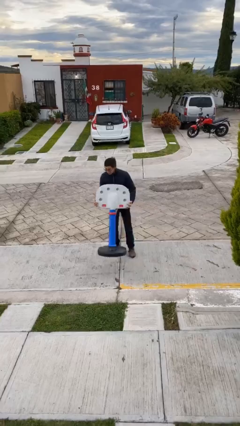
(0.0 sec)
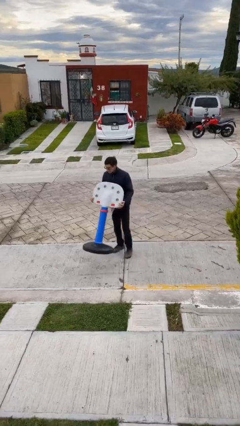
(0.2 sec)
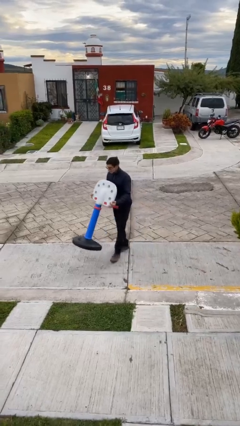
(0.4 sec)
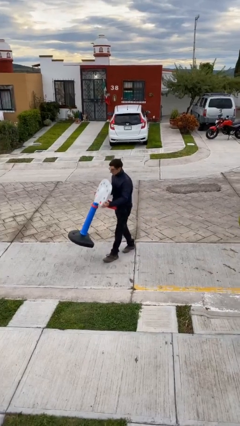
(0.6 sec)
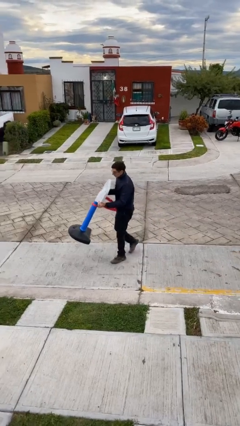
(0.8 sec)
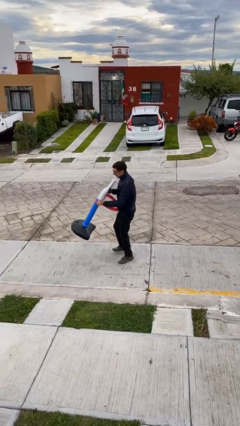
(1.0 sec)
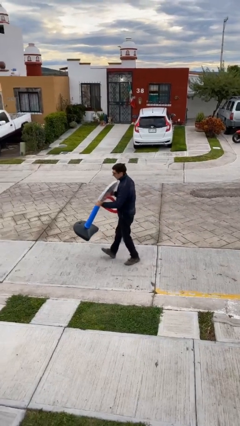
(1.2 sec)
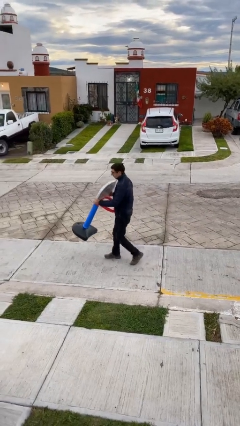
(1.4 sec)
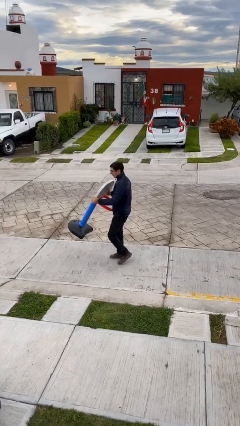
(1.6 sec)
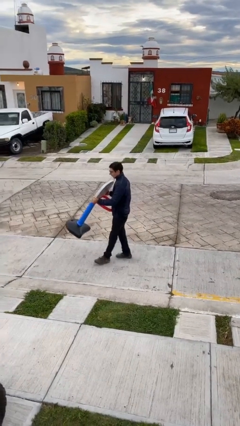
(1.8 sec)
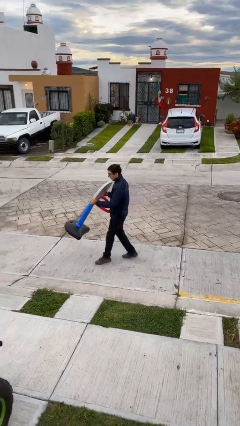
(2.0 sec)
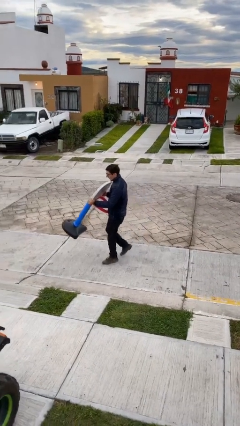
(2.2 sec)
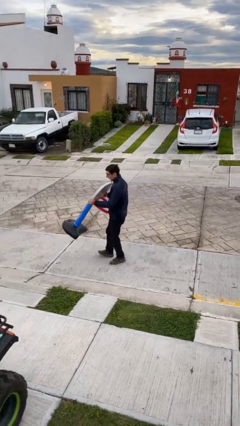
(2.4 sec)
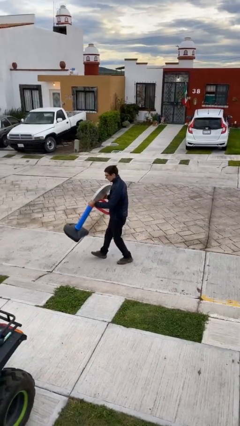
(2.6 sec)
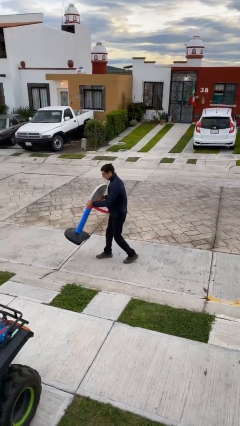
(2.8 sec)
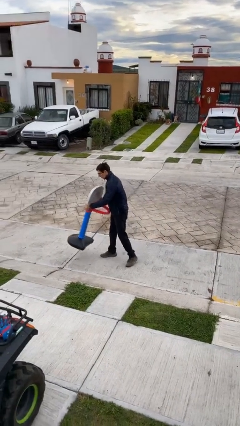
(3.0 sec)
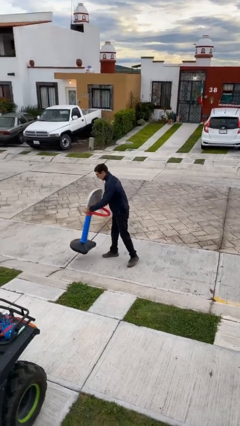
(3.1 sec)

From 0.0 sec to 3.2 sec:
person carries heavy object

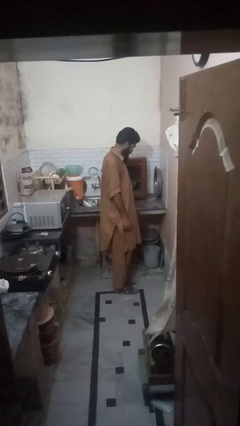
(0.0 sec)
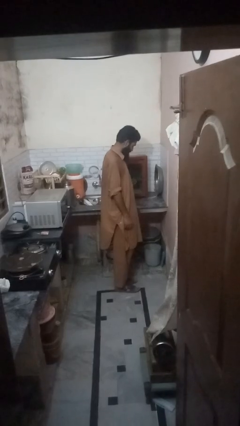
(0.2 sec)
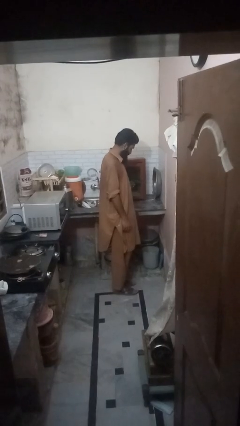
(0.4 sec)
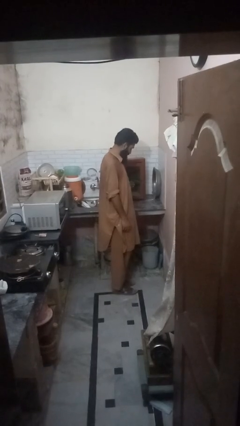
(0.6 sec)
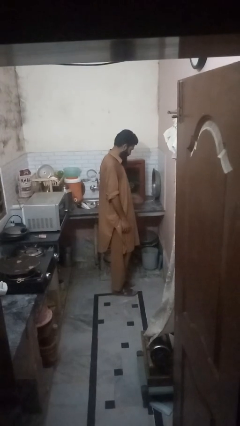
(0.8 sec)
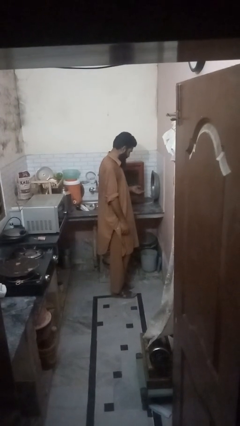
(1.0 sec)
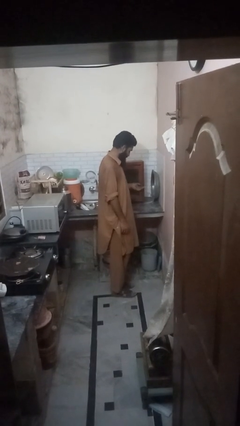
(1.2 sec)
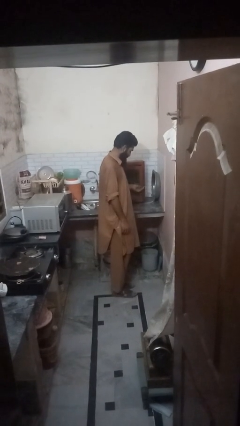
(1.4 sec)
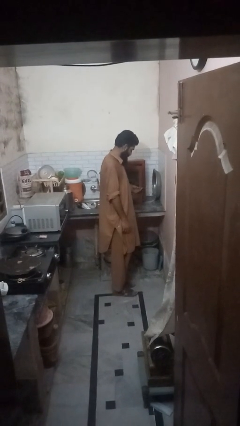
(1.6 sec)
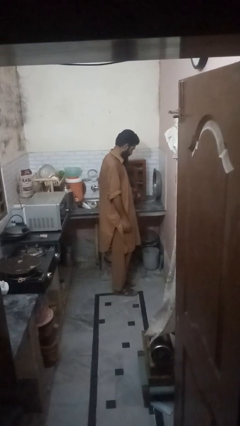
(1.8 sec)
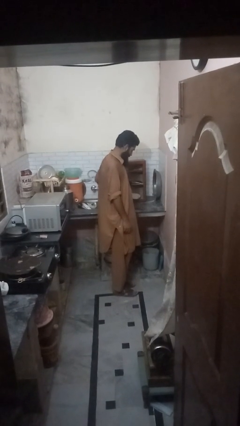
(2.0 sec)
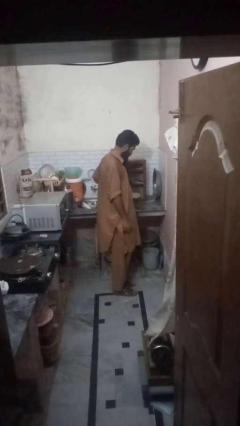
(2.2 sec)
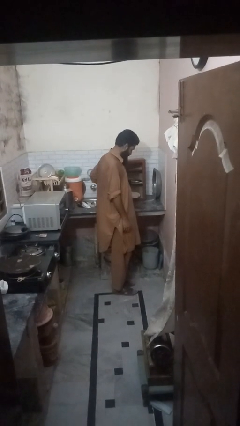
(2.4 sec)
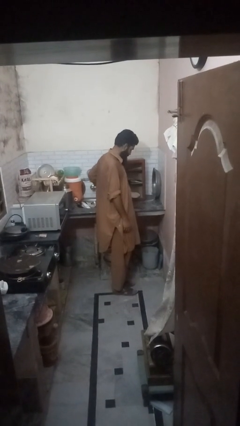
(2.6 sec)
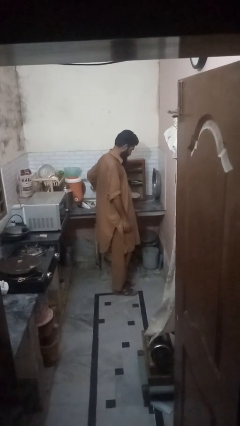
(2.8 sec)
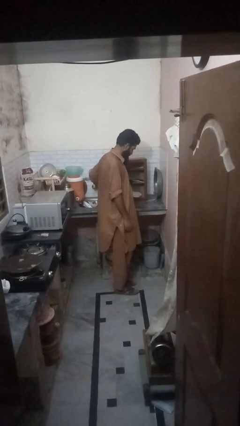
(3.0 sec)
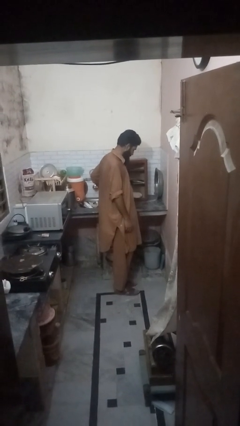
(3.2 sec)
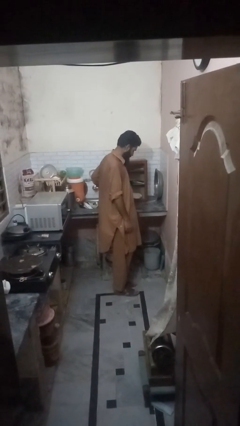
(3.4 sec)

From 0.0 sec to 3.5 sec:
person opens cabinet

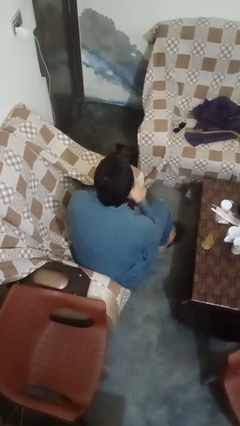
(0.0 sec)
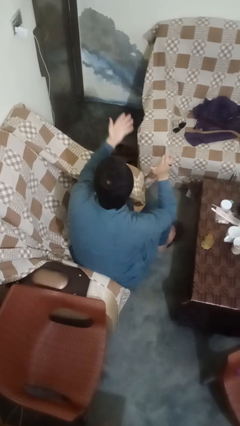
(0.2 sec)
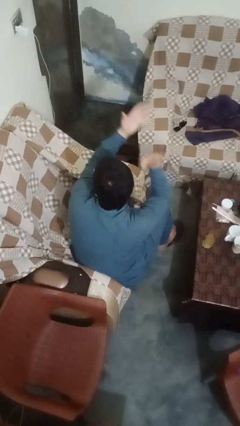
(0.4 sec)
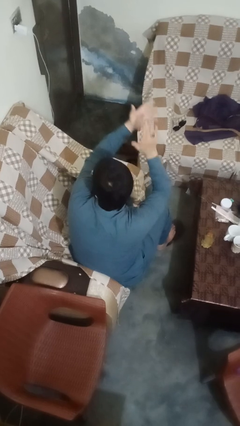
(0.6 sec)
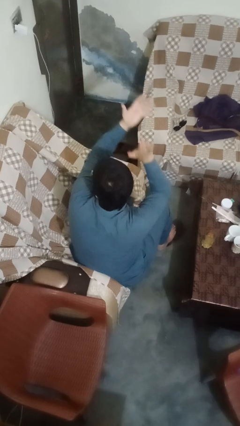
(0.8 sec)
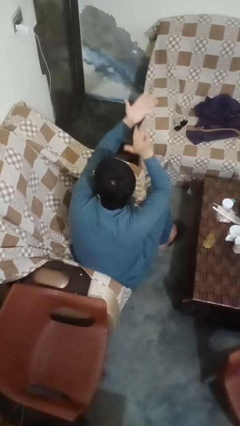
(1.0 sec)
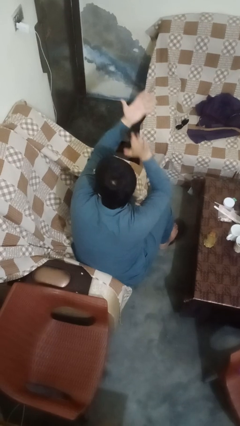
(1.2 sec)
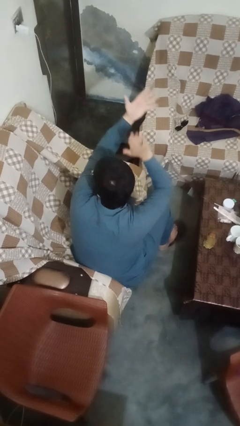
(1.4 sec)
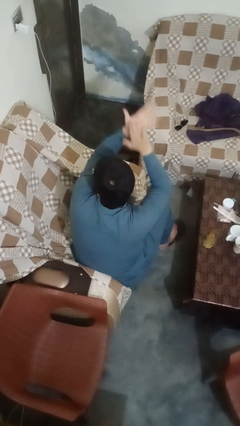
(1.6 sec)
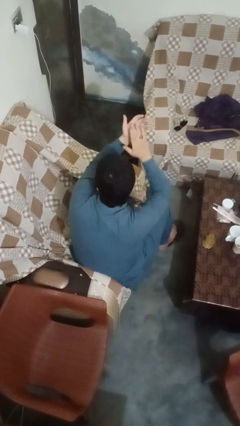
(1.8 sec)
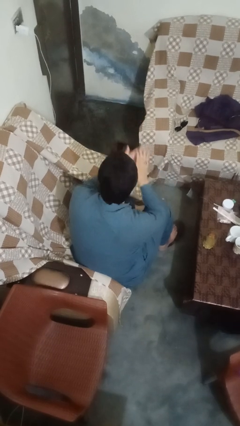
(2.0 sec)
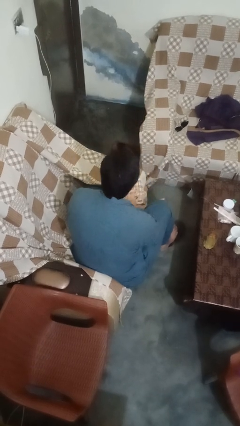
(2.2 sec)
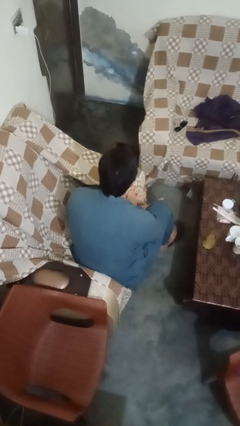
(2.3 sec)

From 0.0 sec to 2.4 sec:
person claps hands

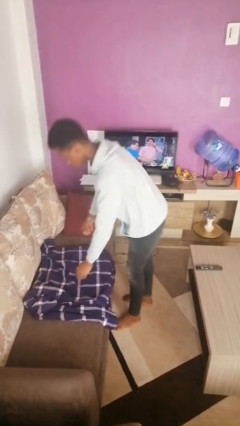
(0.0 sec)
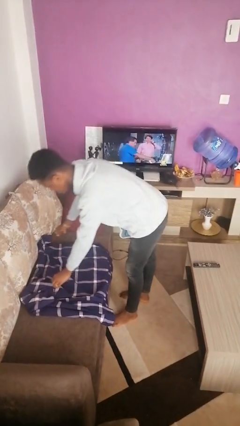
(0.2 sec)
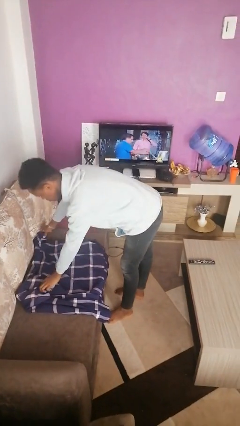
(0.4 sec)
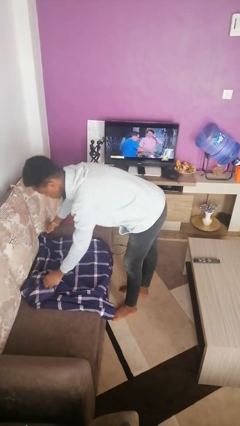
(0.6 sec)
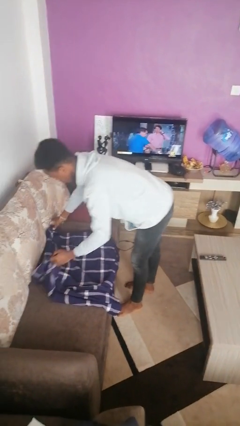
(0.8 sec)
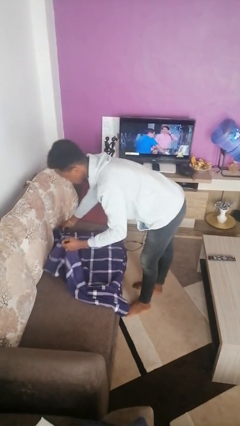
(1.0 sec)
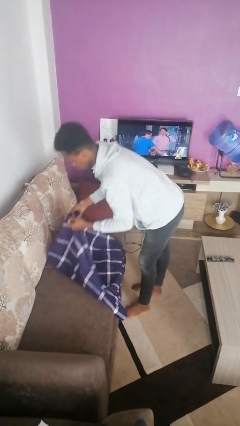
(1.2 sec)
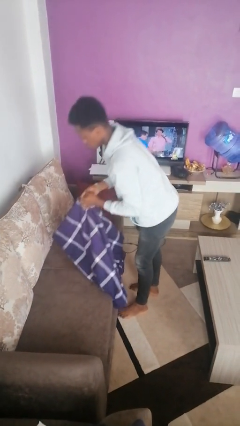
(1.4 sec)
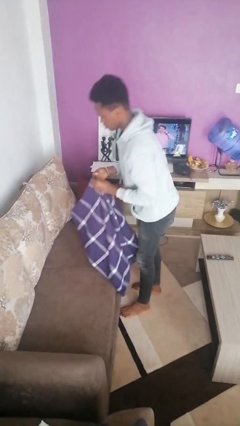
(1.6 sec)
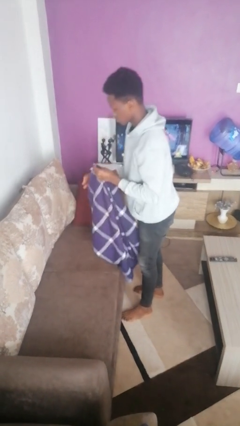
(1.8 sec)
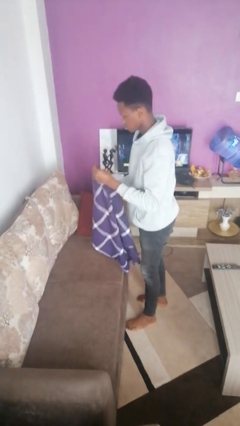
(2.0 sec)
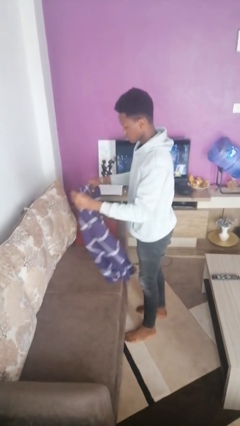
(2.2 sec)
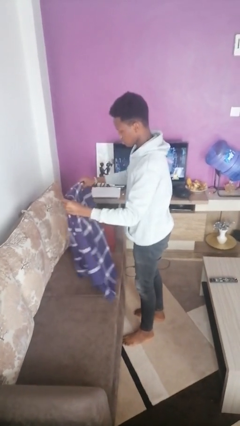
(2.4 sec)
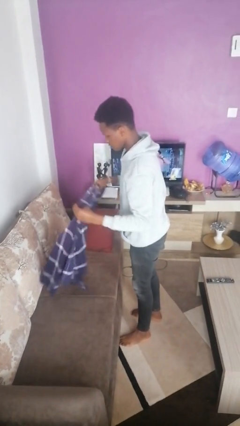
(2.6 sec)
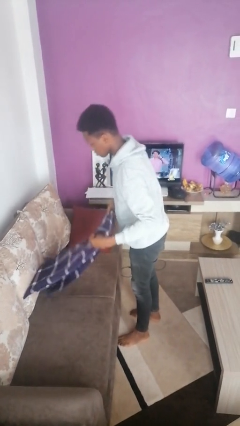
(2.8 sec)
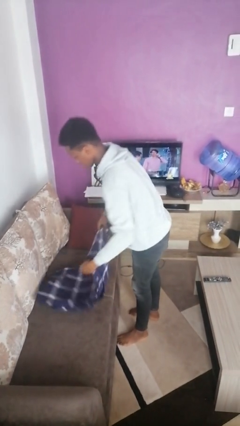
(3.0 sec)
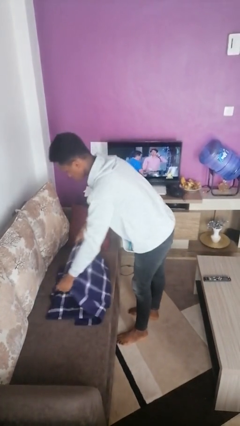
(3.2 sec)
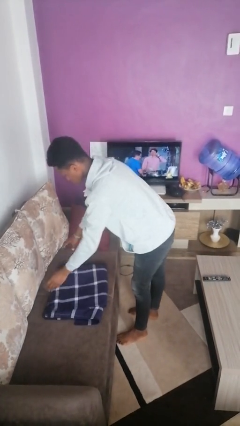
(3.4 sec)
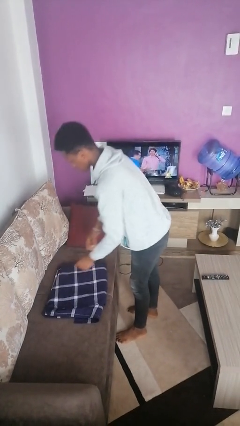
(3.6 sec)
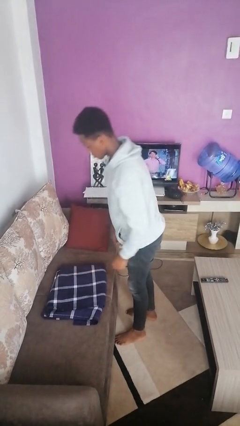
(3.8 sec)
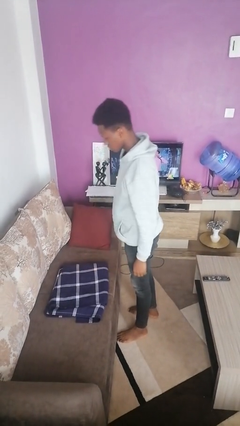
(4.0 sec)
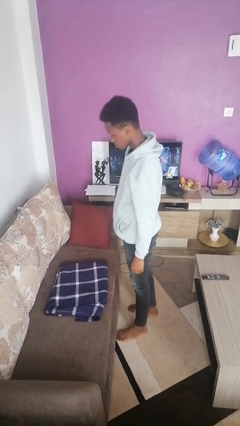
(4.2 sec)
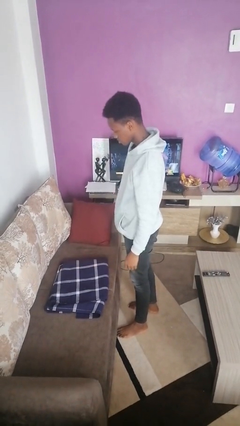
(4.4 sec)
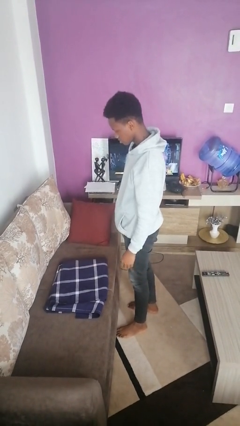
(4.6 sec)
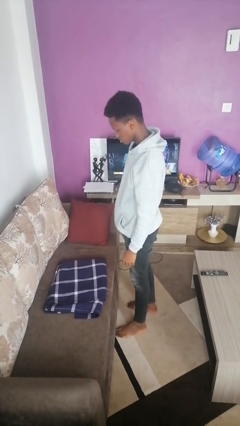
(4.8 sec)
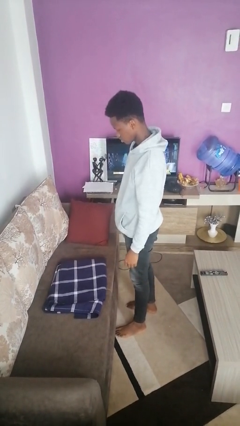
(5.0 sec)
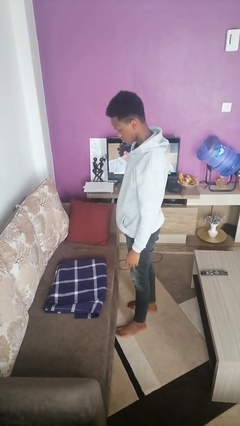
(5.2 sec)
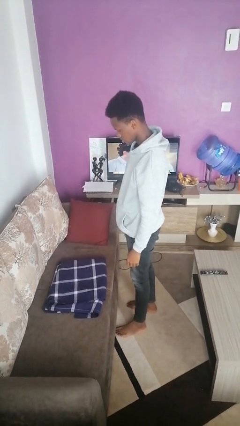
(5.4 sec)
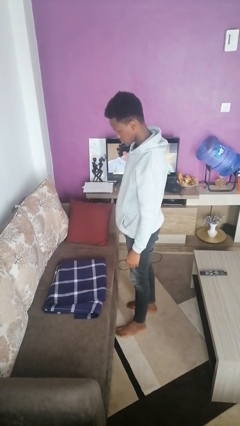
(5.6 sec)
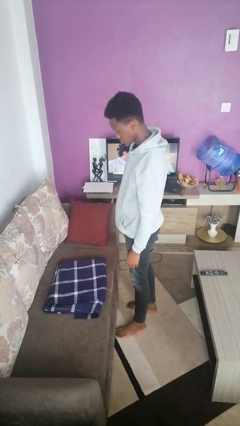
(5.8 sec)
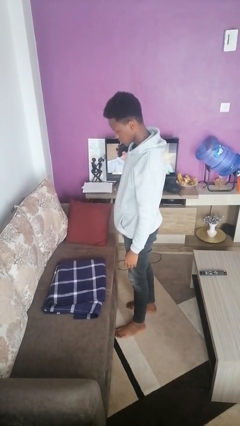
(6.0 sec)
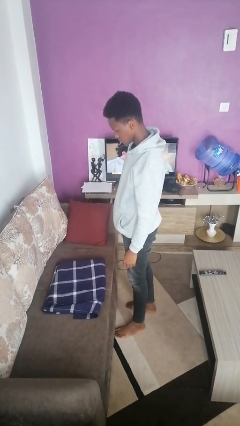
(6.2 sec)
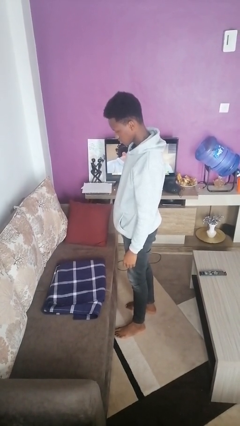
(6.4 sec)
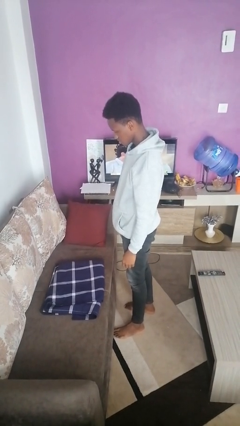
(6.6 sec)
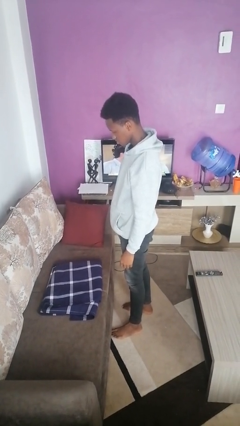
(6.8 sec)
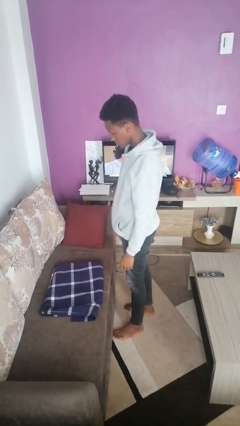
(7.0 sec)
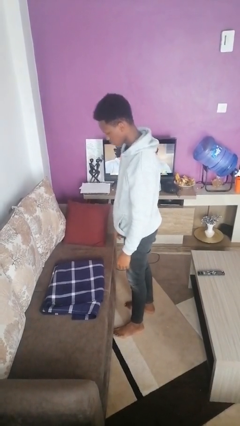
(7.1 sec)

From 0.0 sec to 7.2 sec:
person folds blanket

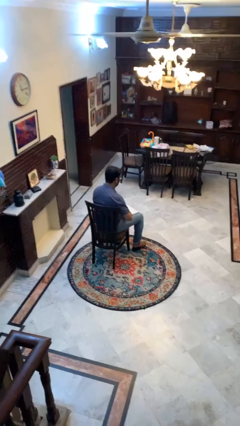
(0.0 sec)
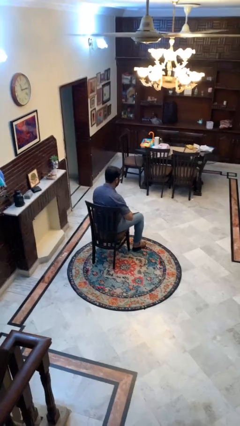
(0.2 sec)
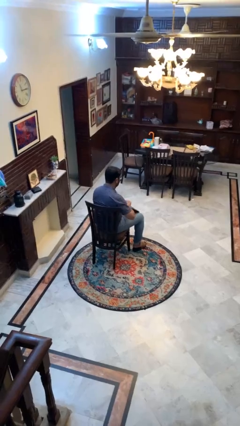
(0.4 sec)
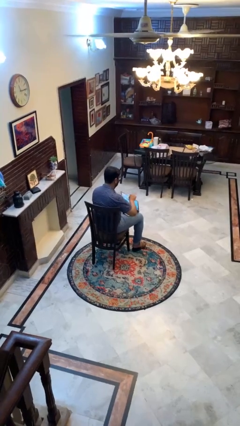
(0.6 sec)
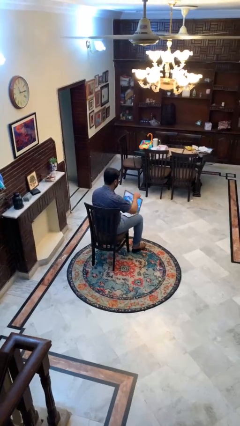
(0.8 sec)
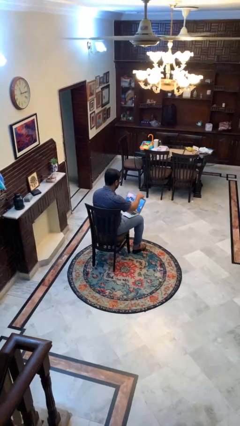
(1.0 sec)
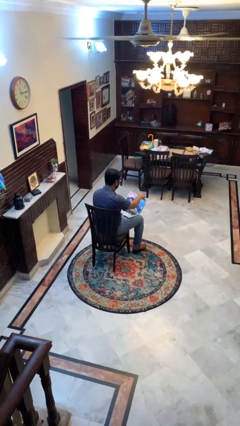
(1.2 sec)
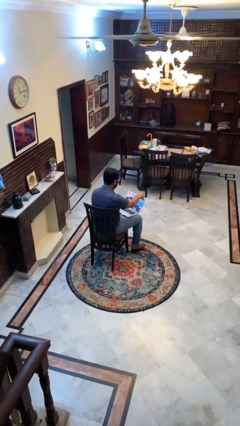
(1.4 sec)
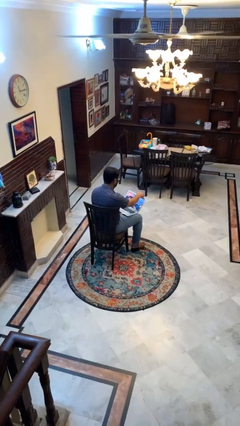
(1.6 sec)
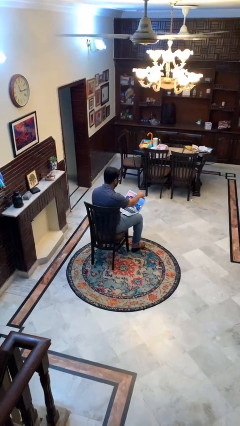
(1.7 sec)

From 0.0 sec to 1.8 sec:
person opens laptop
